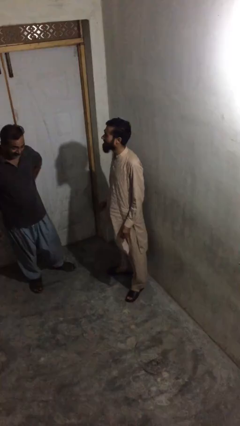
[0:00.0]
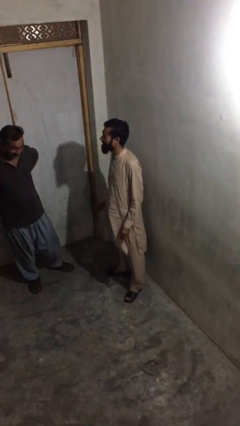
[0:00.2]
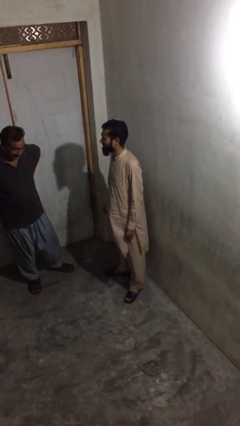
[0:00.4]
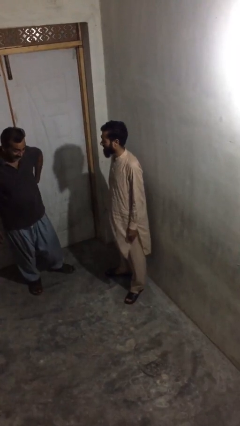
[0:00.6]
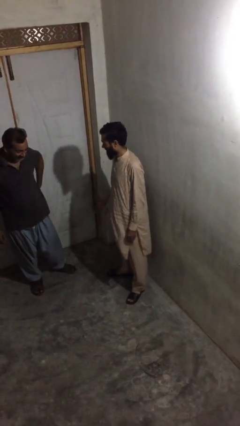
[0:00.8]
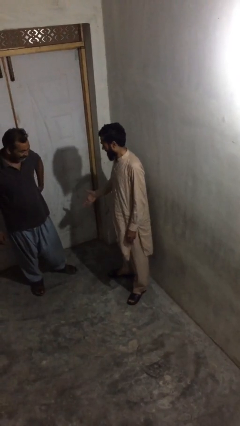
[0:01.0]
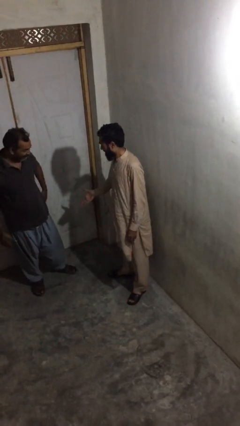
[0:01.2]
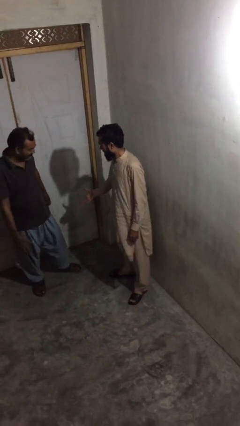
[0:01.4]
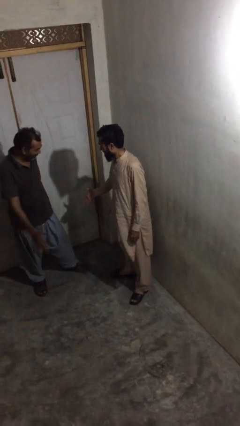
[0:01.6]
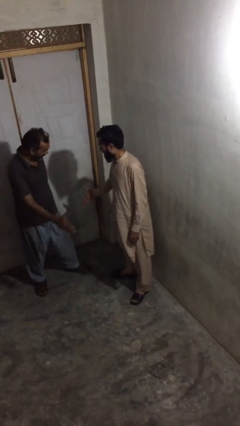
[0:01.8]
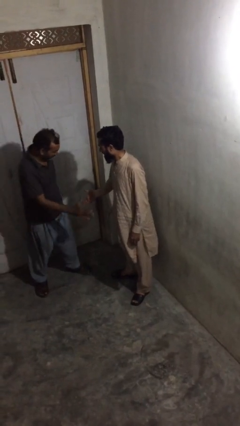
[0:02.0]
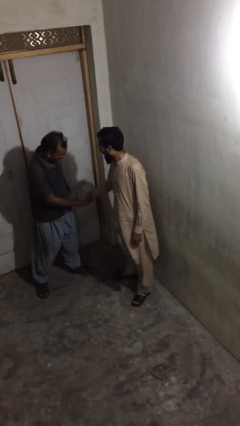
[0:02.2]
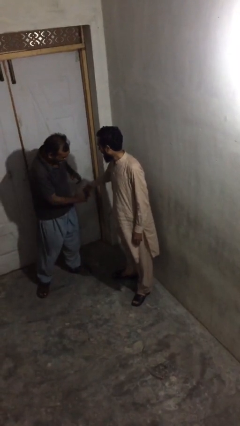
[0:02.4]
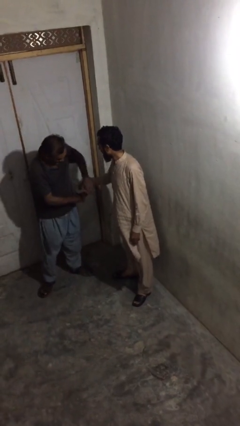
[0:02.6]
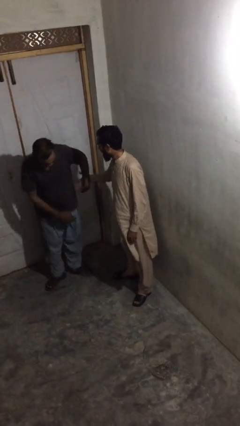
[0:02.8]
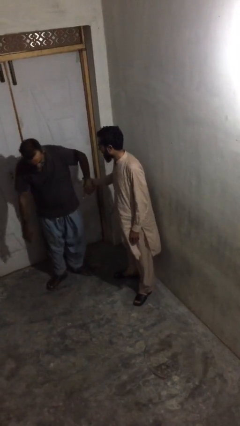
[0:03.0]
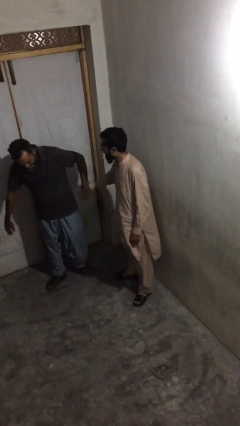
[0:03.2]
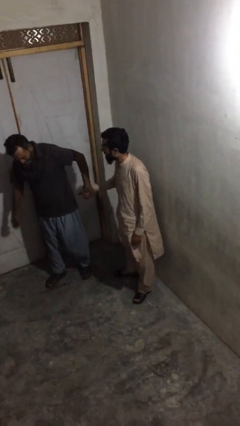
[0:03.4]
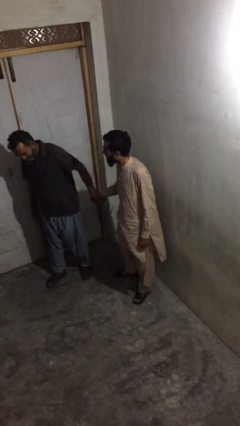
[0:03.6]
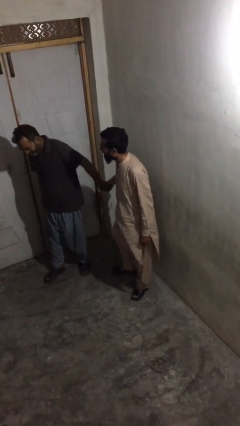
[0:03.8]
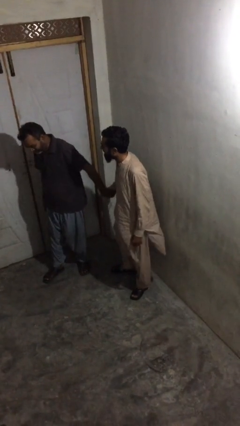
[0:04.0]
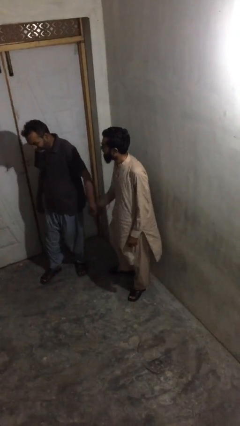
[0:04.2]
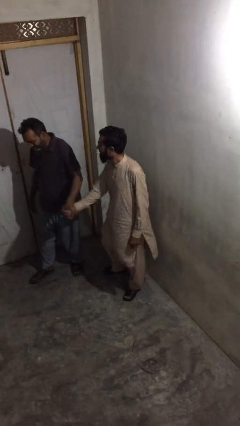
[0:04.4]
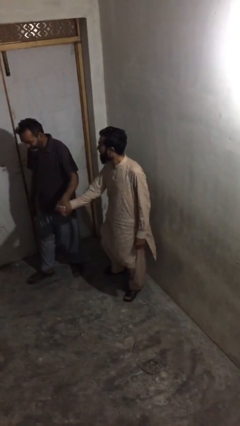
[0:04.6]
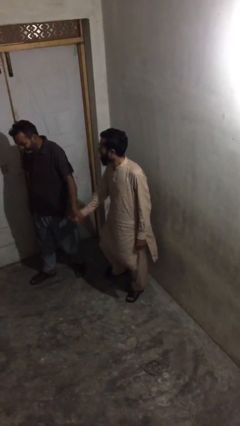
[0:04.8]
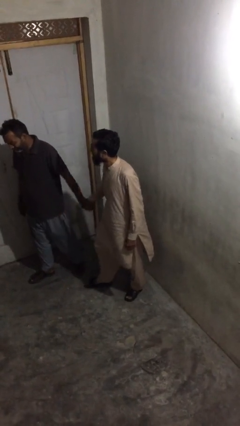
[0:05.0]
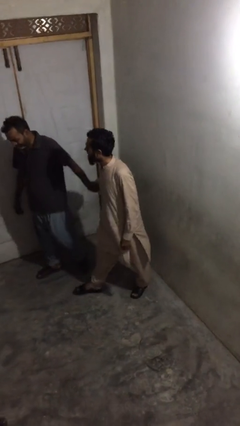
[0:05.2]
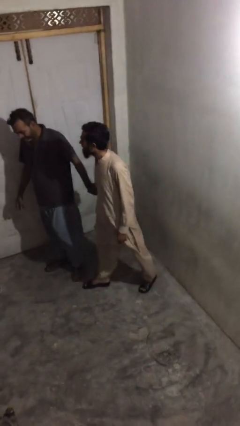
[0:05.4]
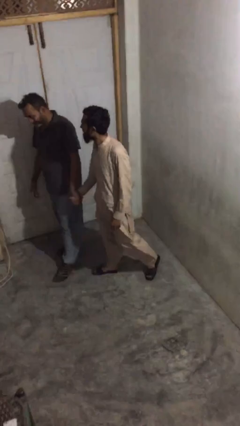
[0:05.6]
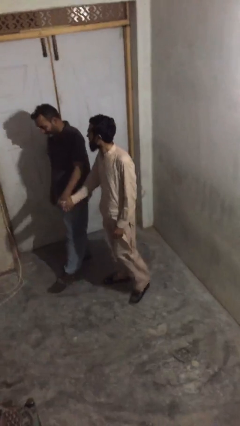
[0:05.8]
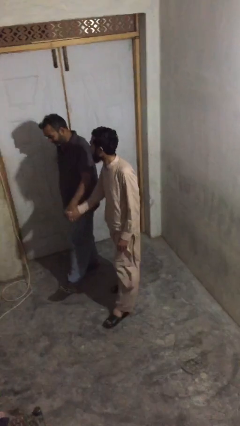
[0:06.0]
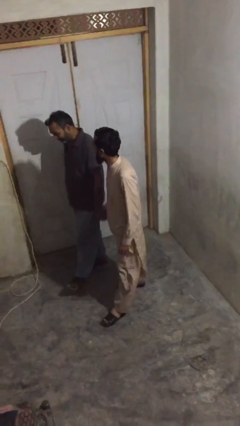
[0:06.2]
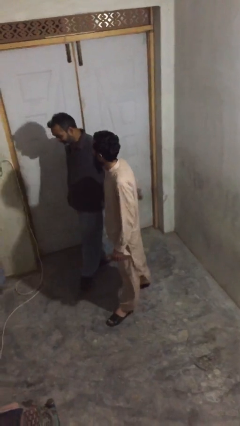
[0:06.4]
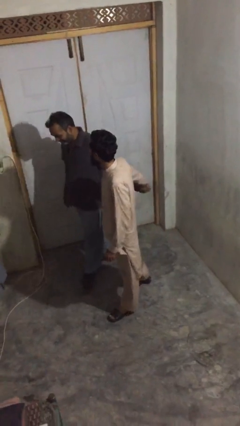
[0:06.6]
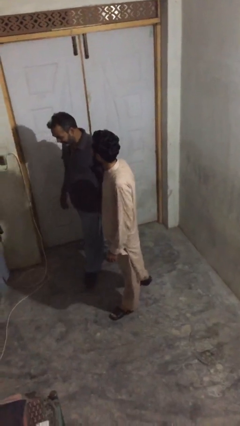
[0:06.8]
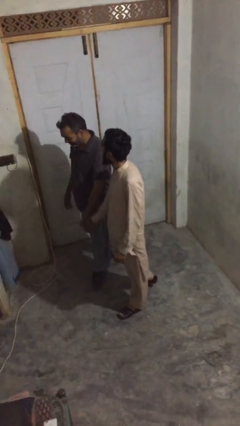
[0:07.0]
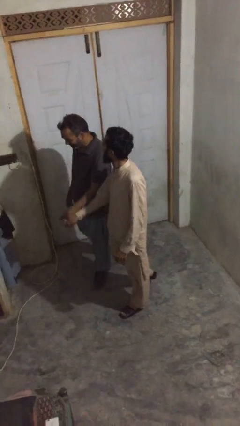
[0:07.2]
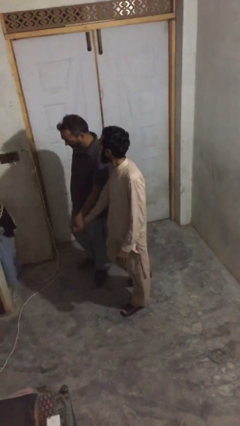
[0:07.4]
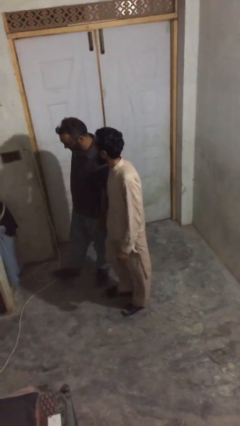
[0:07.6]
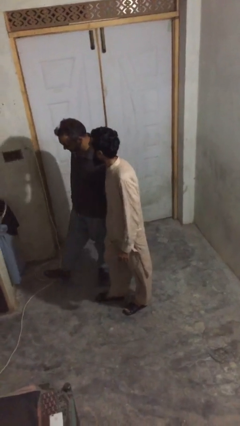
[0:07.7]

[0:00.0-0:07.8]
person holds hand

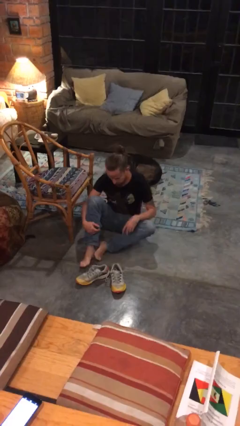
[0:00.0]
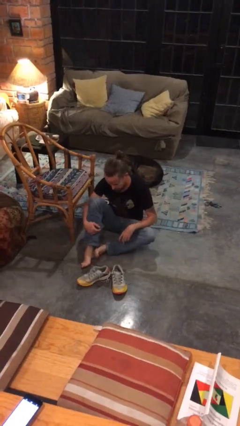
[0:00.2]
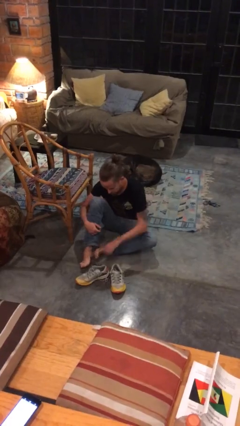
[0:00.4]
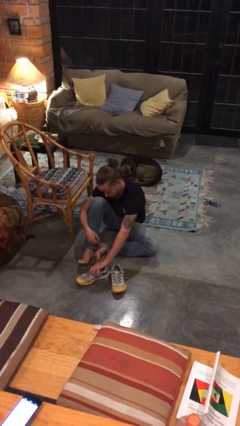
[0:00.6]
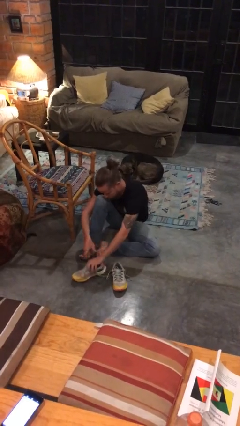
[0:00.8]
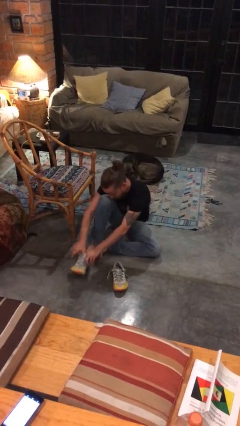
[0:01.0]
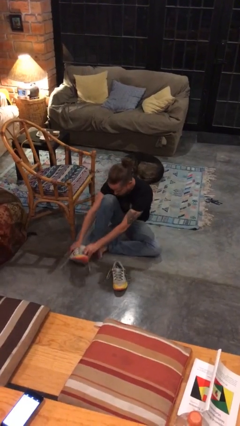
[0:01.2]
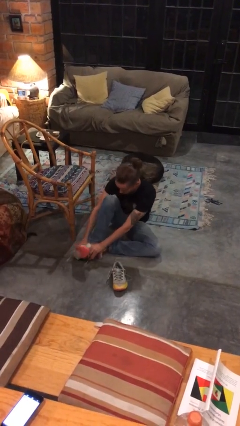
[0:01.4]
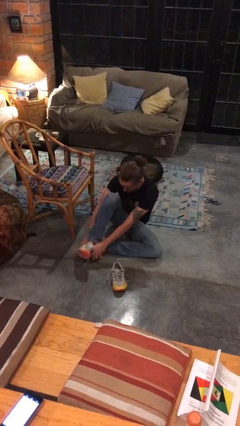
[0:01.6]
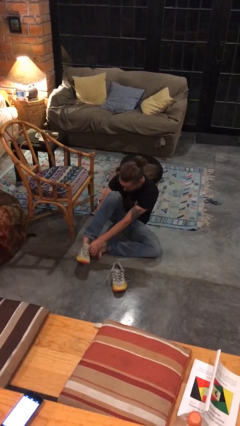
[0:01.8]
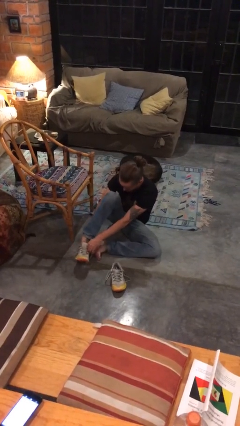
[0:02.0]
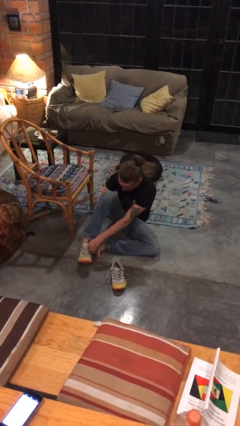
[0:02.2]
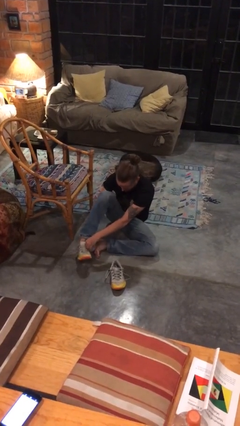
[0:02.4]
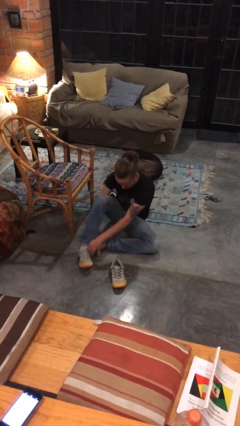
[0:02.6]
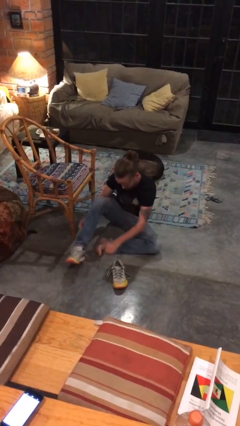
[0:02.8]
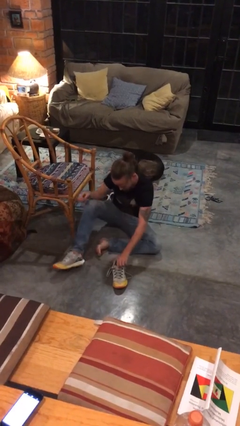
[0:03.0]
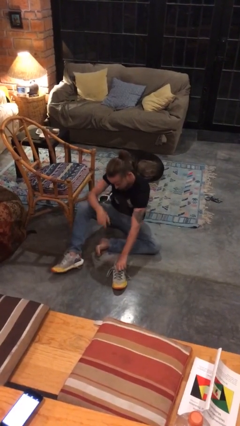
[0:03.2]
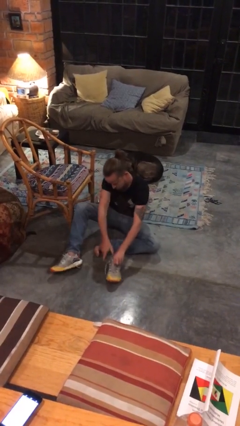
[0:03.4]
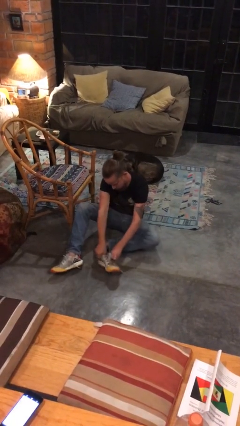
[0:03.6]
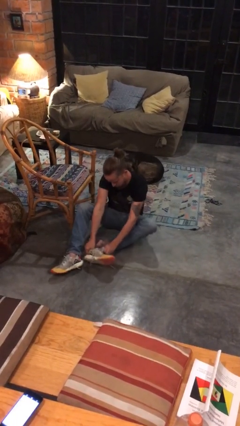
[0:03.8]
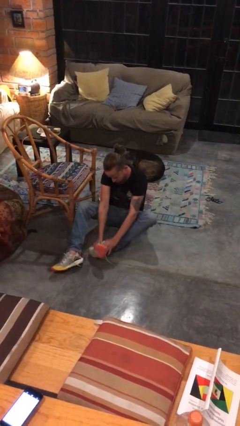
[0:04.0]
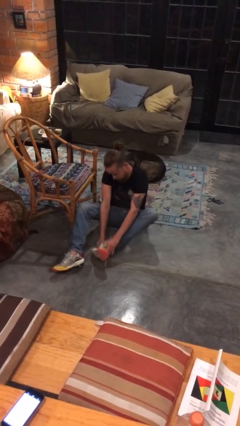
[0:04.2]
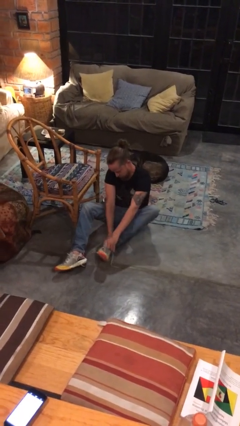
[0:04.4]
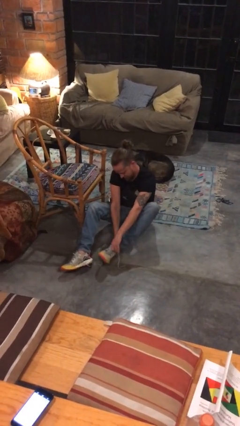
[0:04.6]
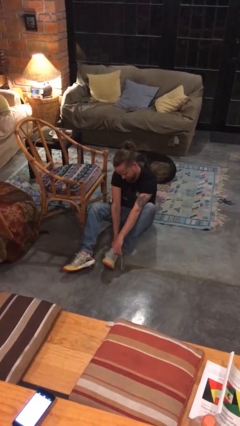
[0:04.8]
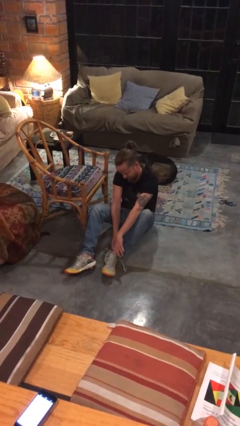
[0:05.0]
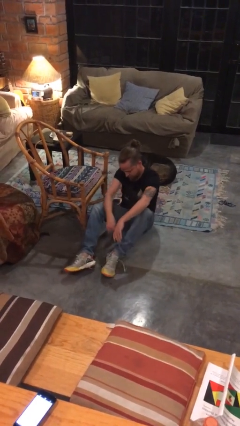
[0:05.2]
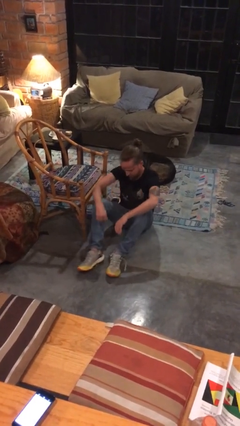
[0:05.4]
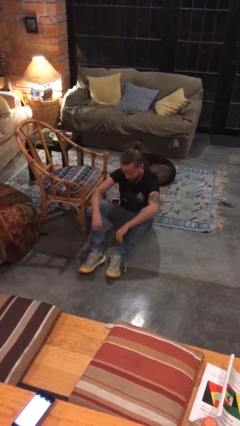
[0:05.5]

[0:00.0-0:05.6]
person puts on shoes

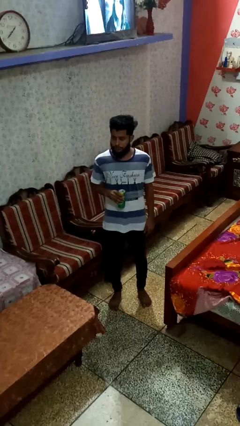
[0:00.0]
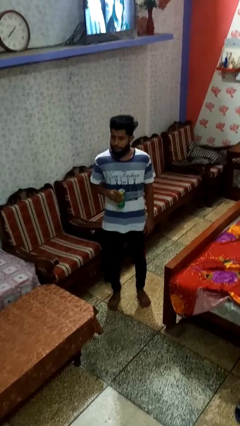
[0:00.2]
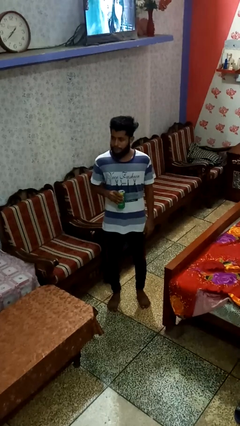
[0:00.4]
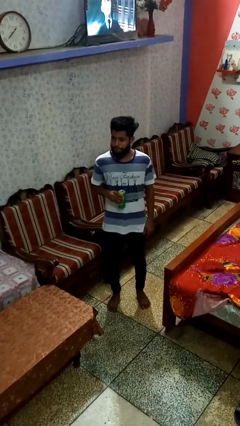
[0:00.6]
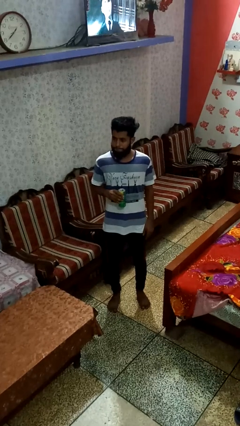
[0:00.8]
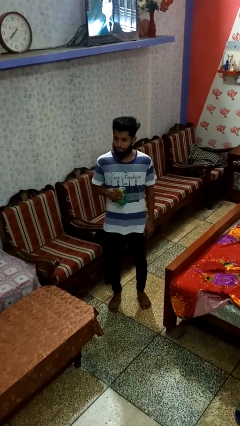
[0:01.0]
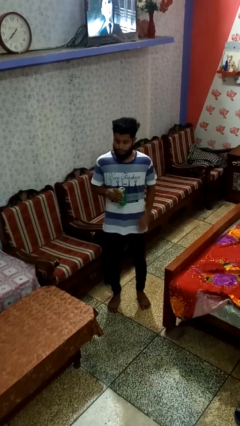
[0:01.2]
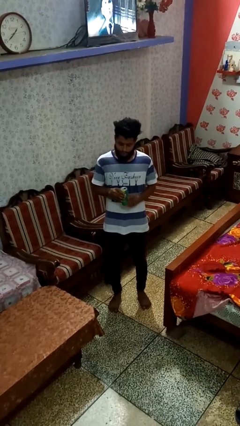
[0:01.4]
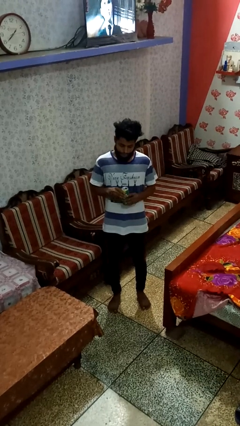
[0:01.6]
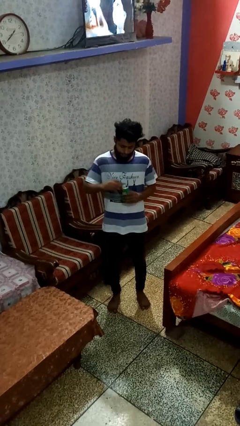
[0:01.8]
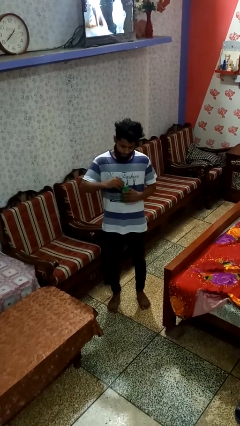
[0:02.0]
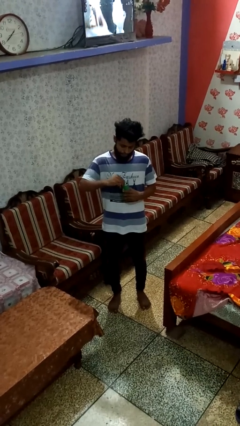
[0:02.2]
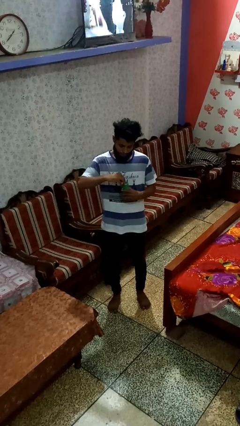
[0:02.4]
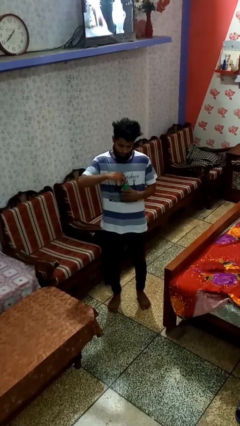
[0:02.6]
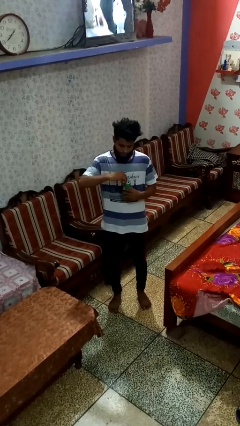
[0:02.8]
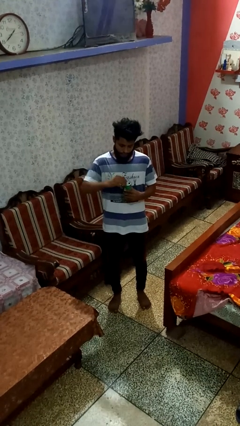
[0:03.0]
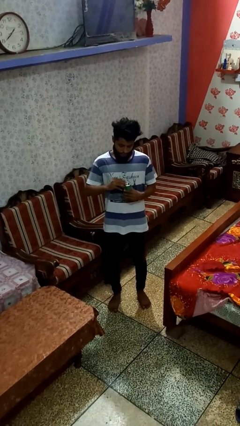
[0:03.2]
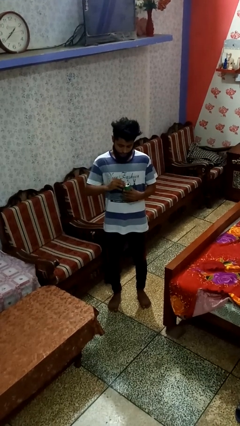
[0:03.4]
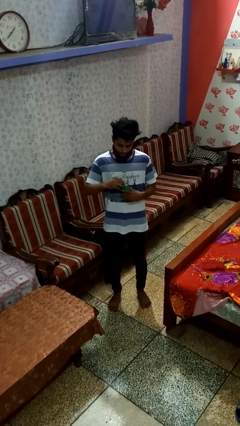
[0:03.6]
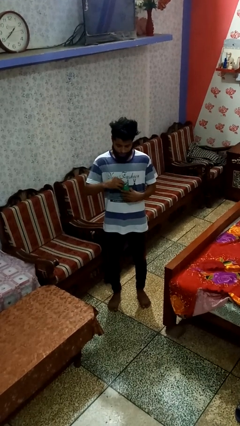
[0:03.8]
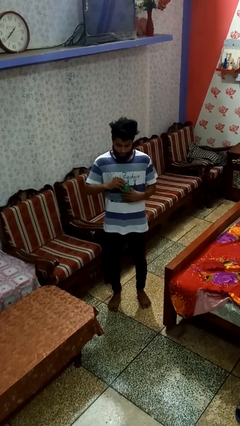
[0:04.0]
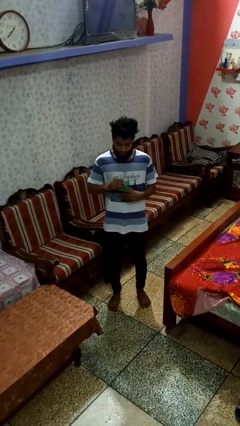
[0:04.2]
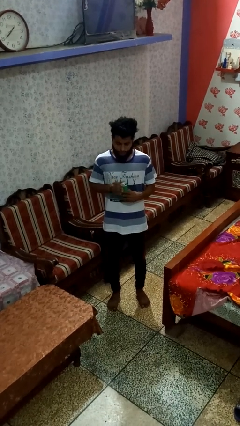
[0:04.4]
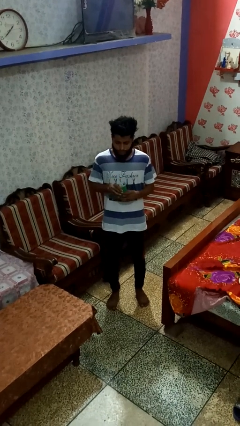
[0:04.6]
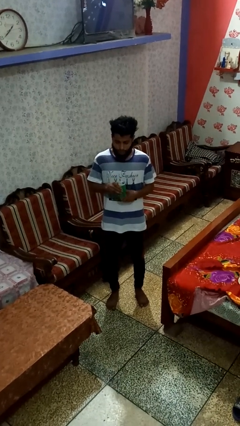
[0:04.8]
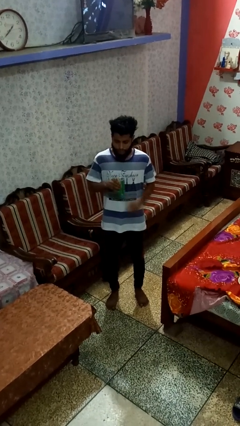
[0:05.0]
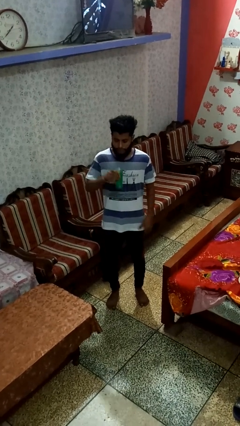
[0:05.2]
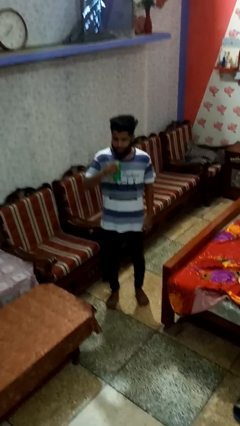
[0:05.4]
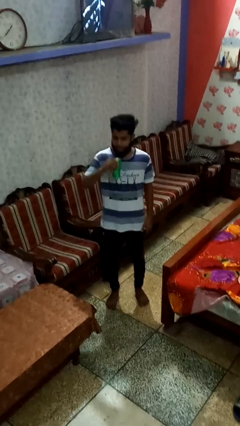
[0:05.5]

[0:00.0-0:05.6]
person opens beverage can
